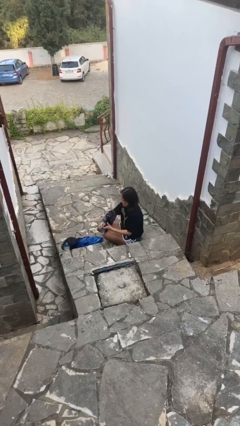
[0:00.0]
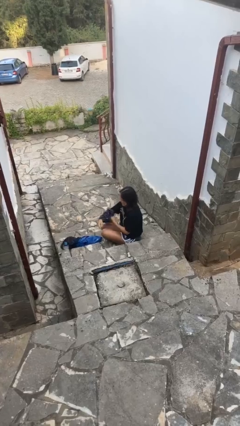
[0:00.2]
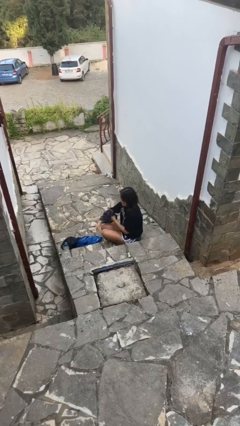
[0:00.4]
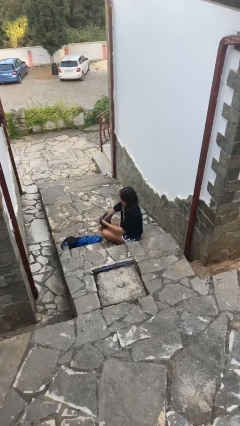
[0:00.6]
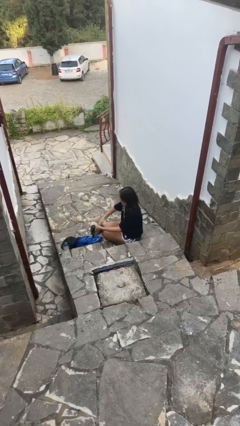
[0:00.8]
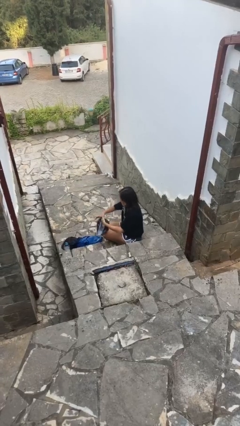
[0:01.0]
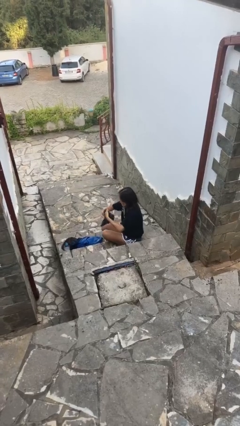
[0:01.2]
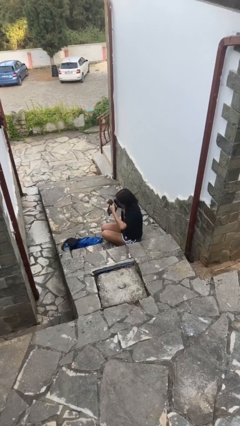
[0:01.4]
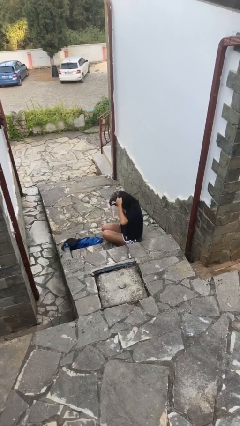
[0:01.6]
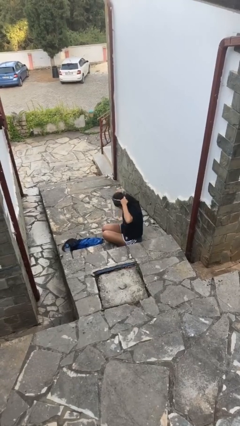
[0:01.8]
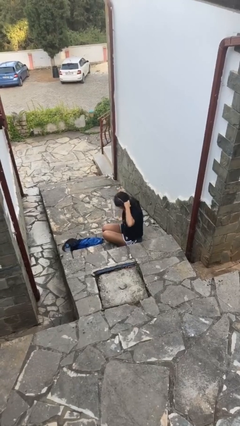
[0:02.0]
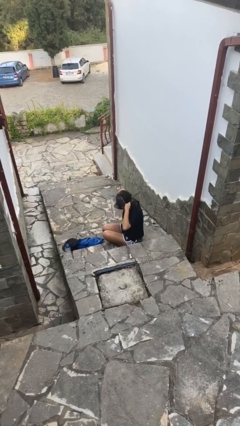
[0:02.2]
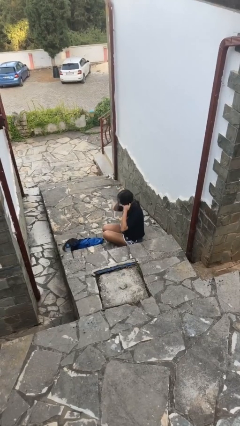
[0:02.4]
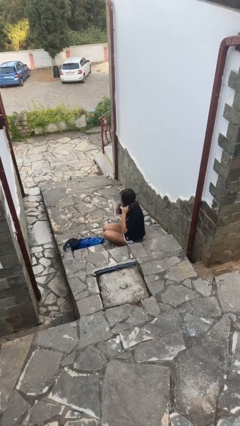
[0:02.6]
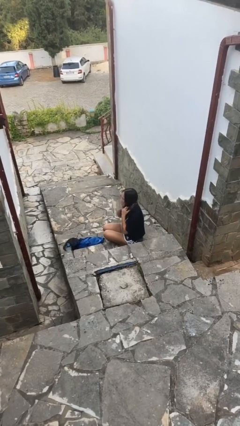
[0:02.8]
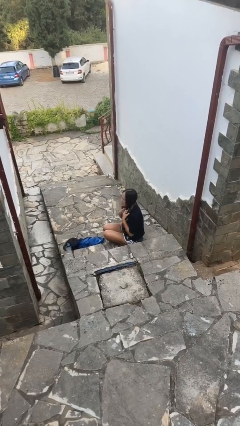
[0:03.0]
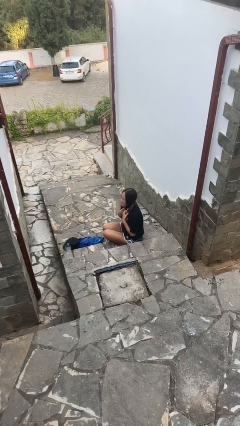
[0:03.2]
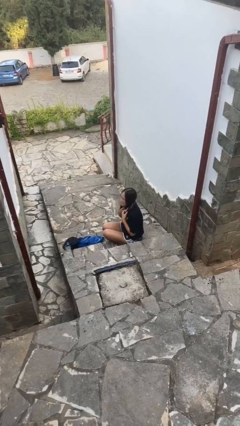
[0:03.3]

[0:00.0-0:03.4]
person puts on scarf

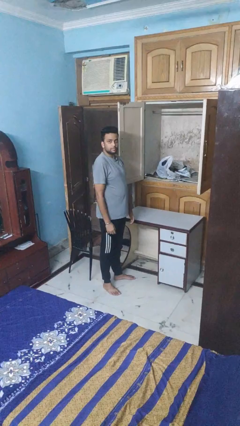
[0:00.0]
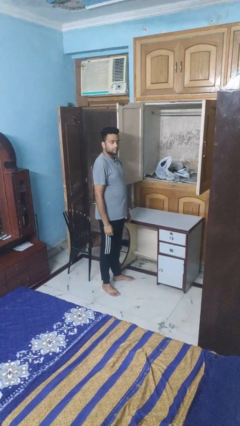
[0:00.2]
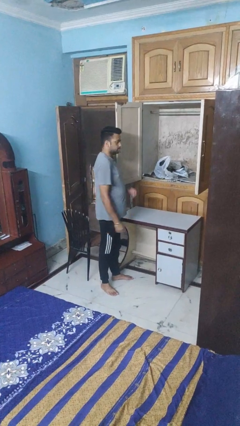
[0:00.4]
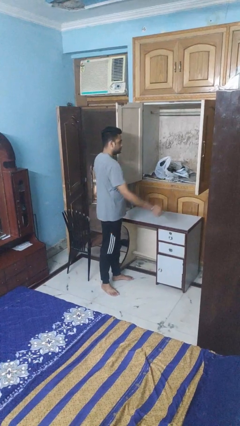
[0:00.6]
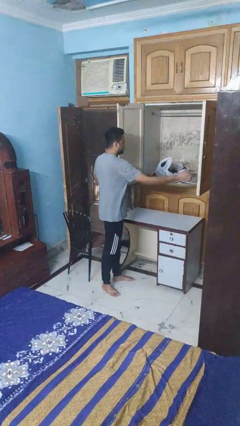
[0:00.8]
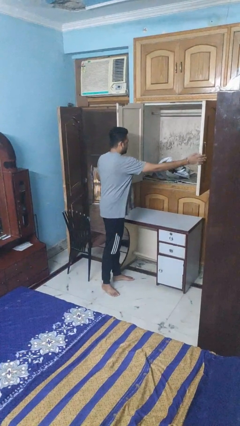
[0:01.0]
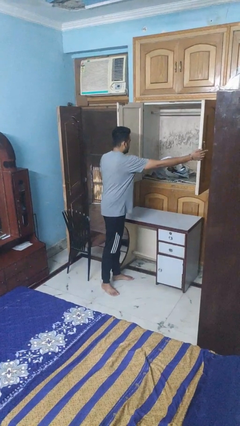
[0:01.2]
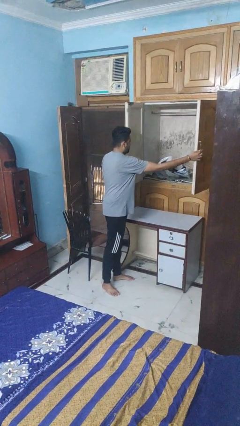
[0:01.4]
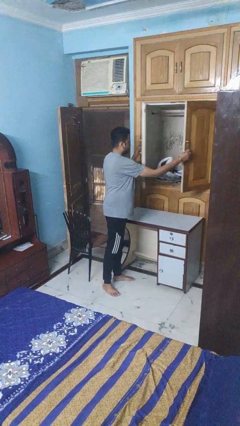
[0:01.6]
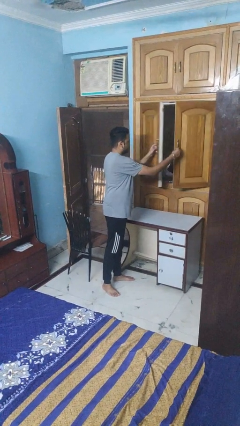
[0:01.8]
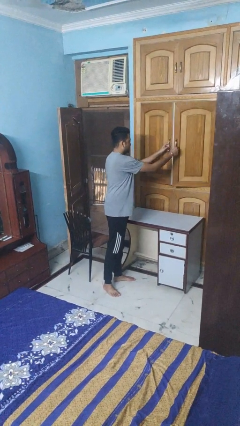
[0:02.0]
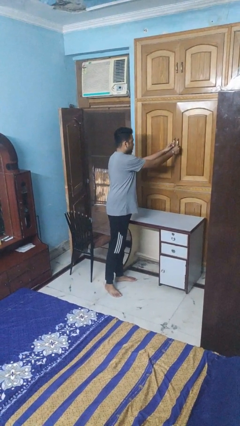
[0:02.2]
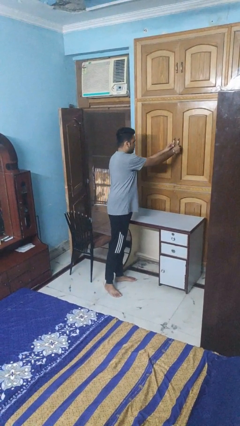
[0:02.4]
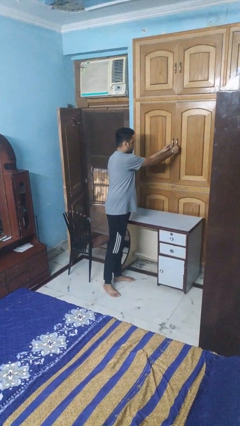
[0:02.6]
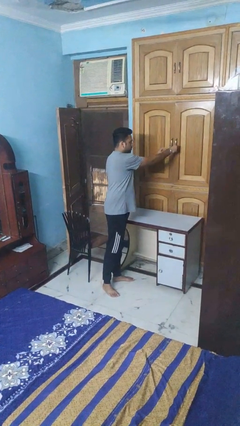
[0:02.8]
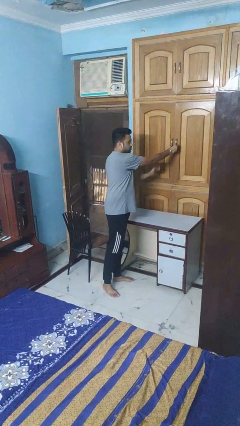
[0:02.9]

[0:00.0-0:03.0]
person closes closet door

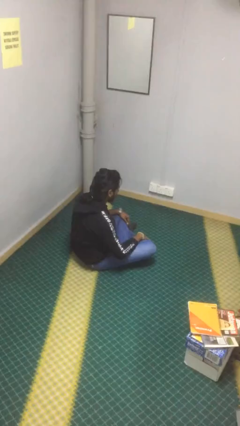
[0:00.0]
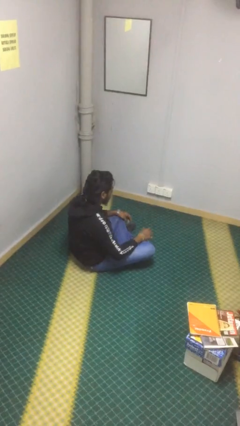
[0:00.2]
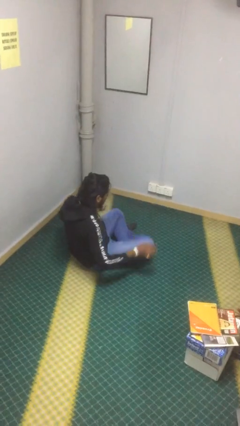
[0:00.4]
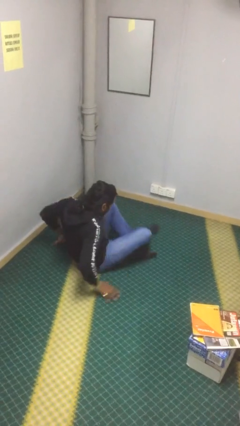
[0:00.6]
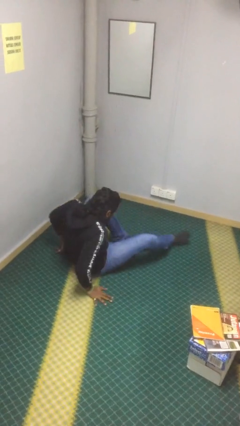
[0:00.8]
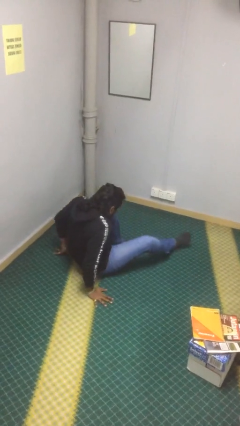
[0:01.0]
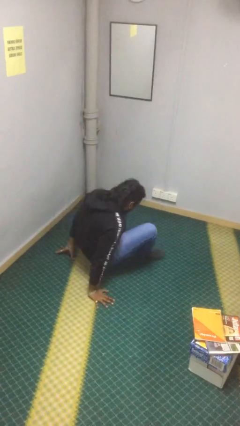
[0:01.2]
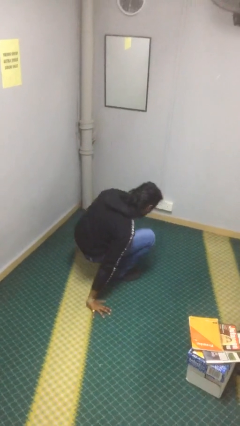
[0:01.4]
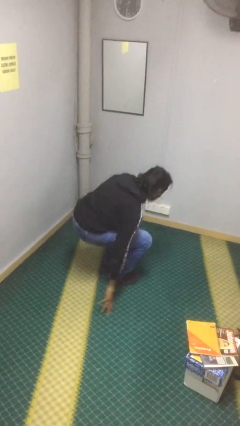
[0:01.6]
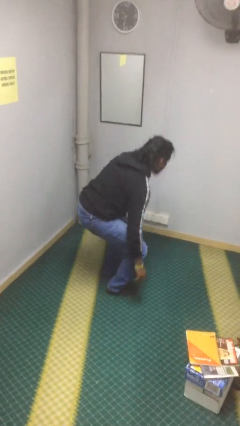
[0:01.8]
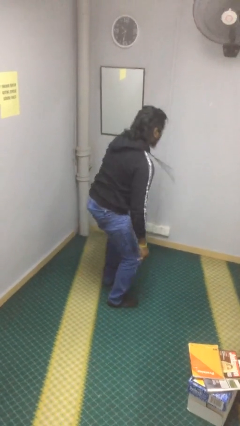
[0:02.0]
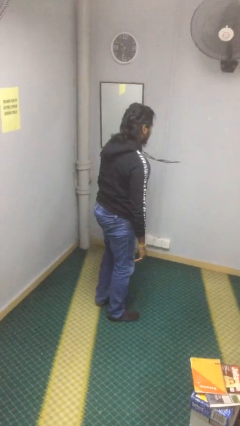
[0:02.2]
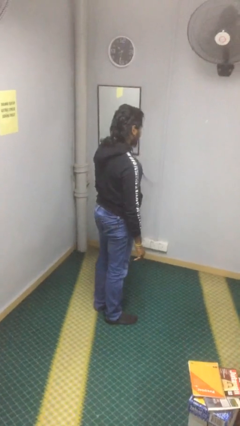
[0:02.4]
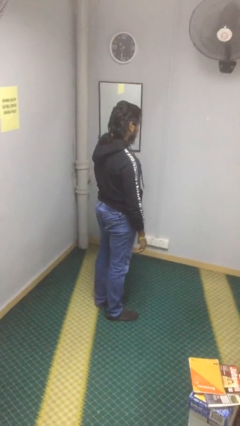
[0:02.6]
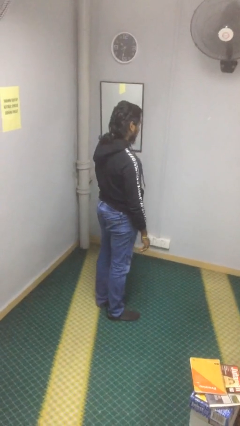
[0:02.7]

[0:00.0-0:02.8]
person stands up from floor

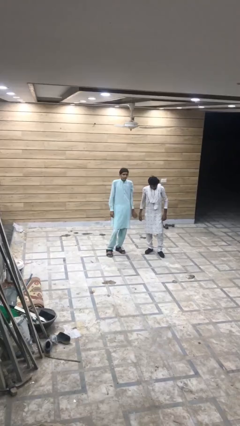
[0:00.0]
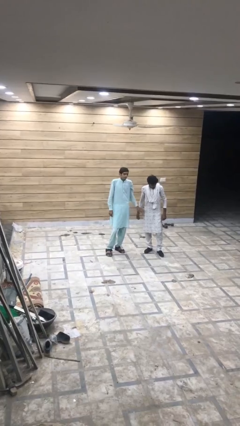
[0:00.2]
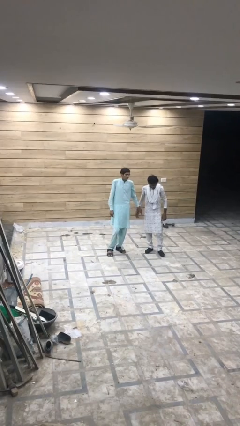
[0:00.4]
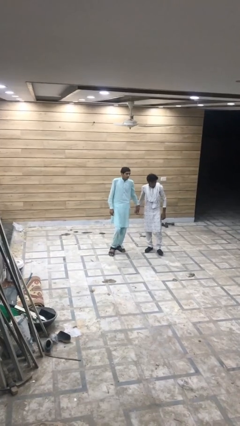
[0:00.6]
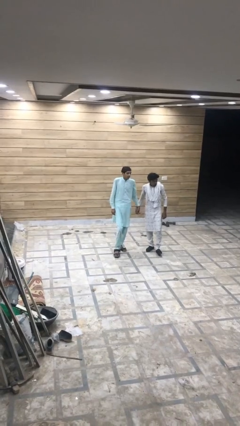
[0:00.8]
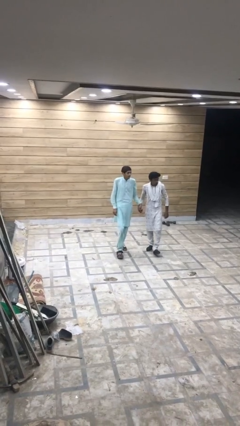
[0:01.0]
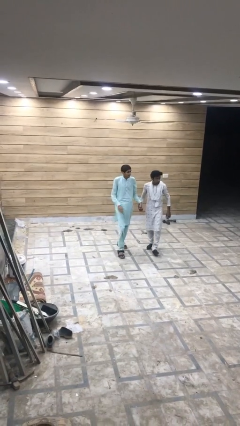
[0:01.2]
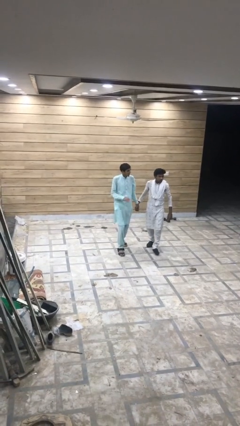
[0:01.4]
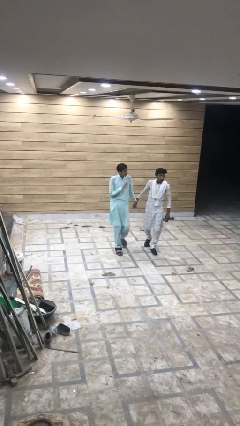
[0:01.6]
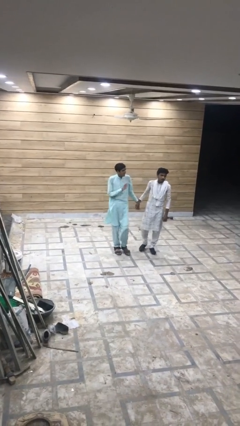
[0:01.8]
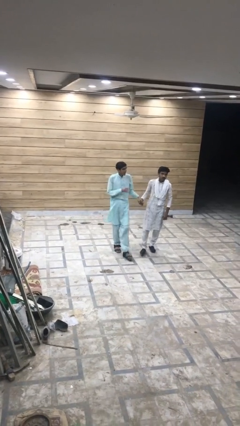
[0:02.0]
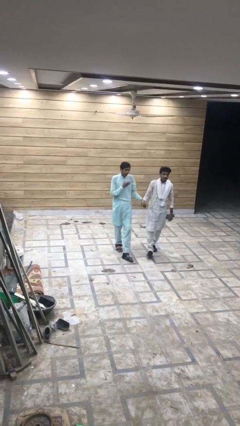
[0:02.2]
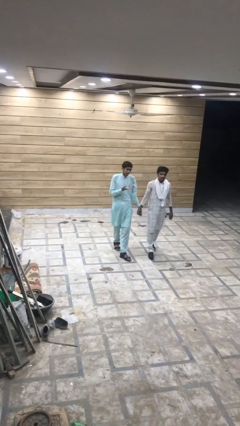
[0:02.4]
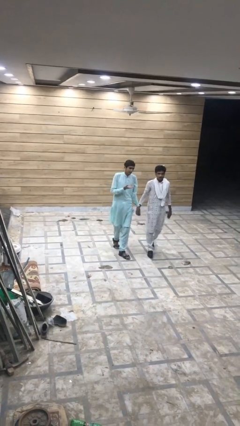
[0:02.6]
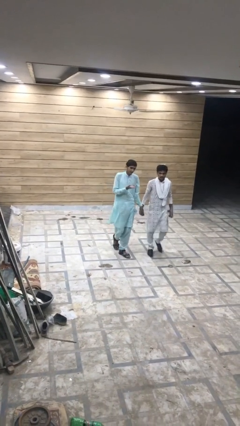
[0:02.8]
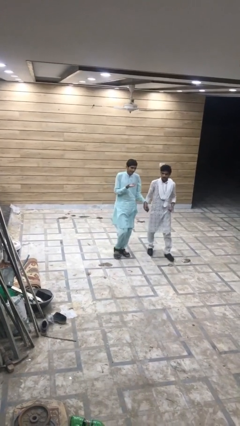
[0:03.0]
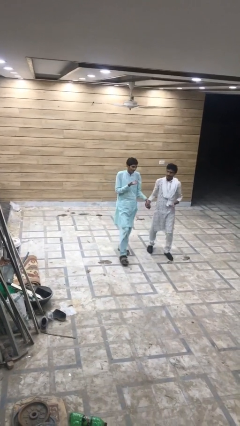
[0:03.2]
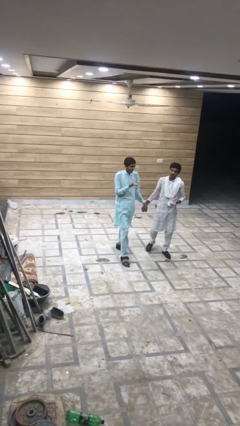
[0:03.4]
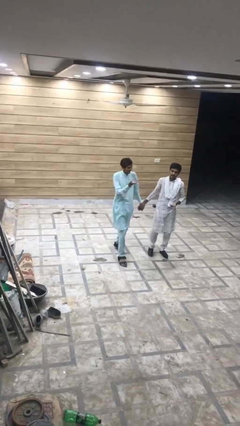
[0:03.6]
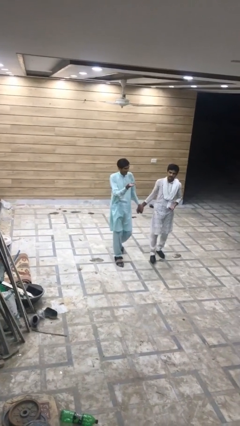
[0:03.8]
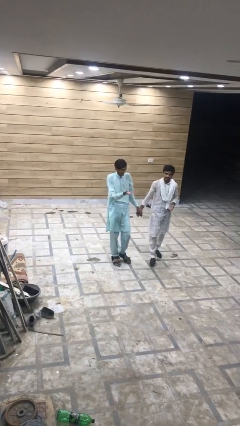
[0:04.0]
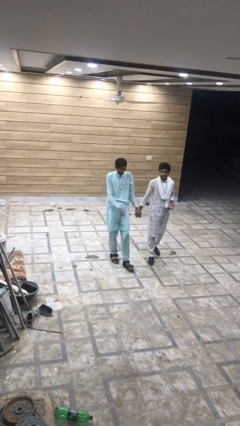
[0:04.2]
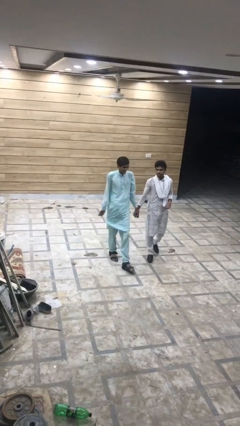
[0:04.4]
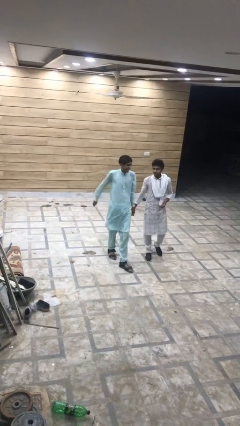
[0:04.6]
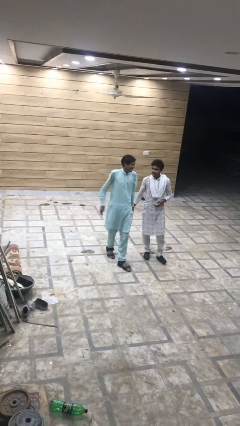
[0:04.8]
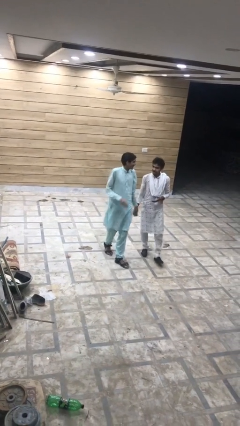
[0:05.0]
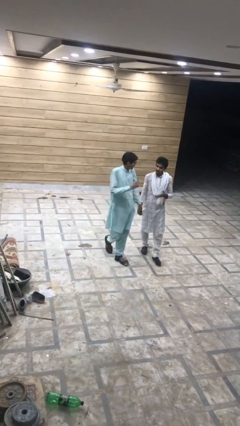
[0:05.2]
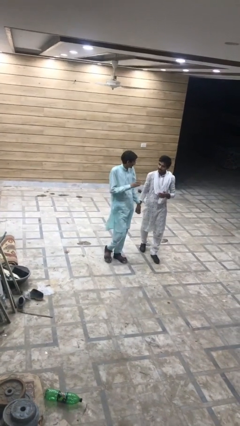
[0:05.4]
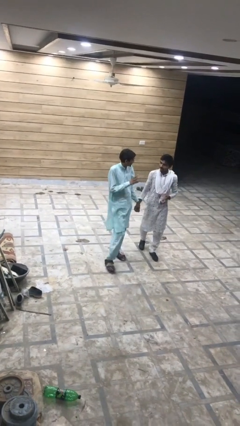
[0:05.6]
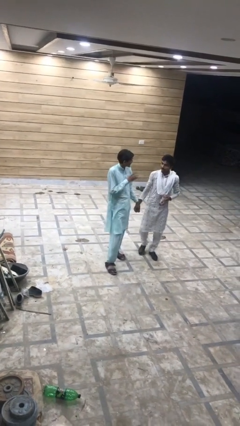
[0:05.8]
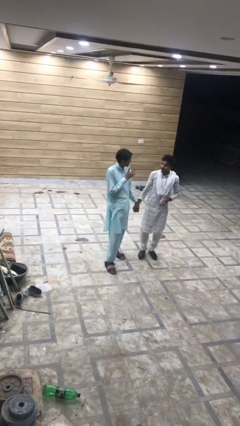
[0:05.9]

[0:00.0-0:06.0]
person holds hand

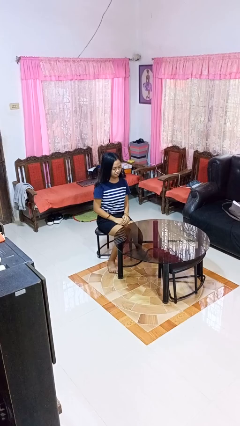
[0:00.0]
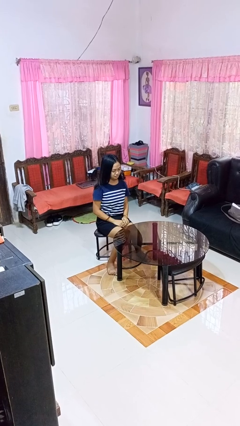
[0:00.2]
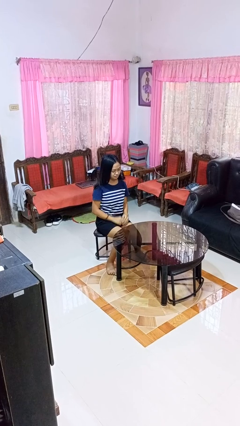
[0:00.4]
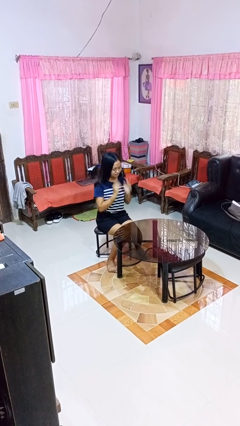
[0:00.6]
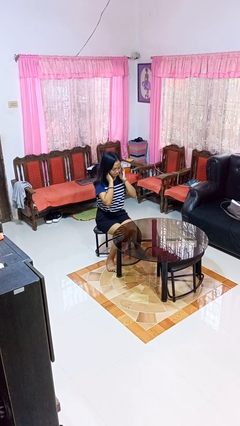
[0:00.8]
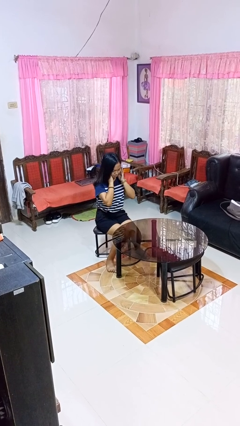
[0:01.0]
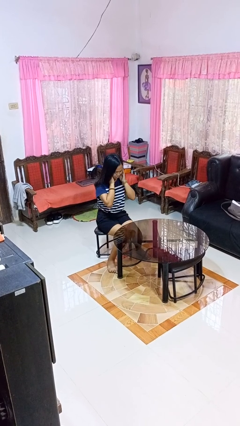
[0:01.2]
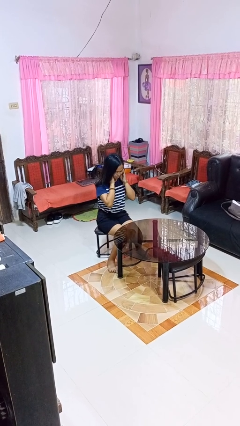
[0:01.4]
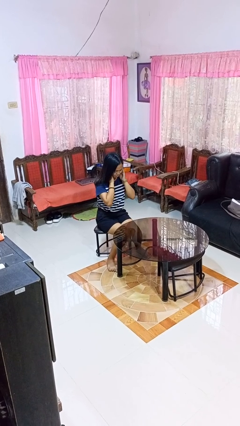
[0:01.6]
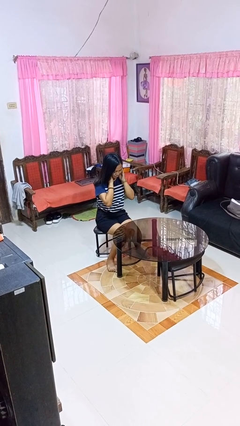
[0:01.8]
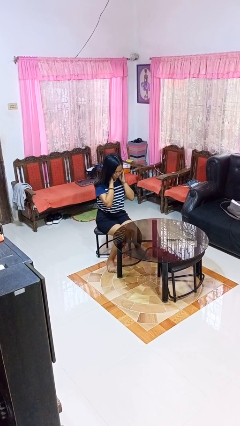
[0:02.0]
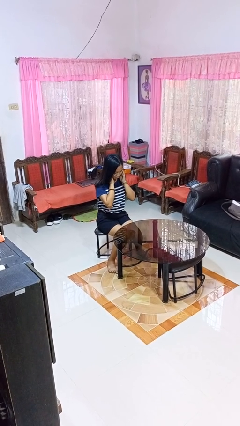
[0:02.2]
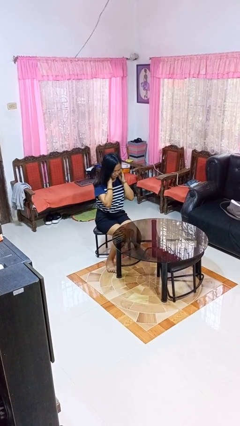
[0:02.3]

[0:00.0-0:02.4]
person puts fingers in ear
